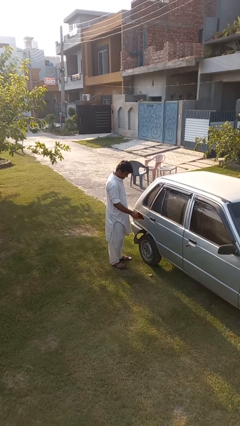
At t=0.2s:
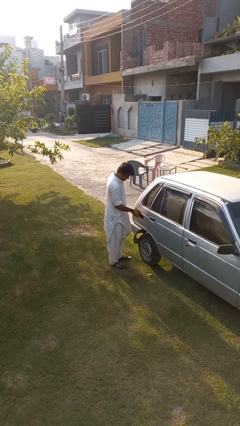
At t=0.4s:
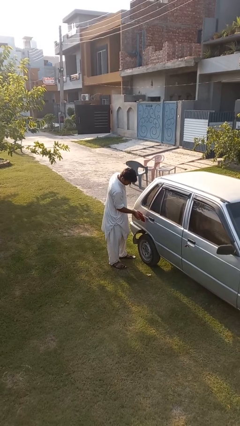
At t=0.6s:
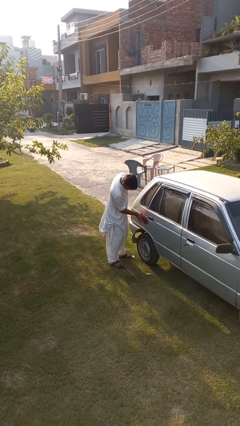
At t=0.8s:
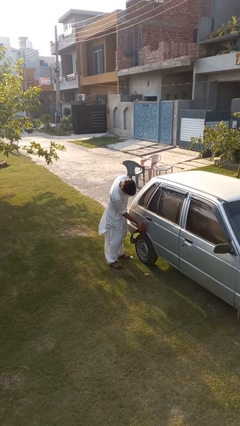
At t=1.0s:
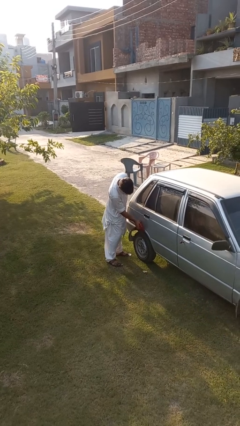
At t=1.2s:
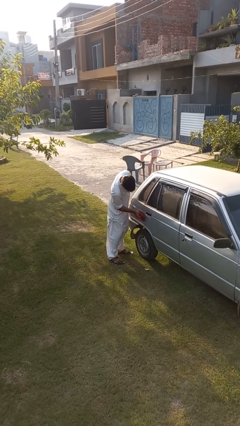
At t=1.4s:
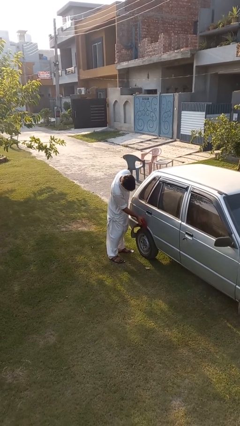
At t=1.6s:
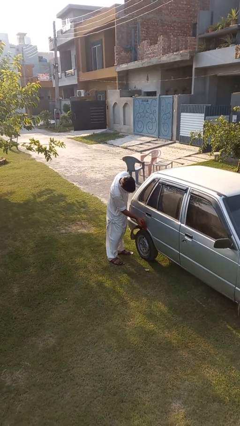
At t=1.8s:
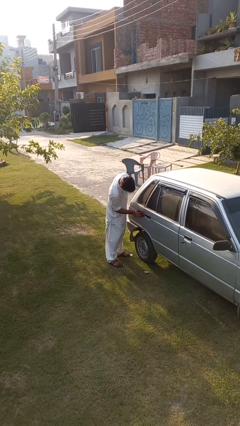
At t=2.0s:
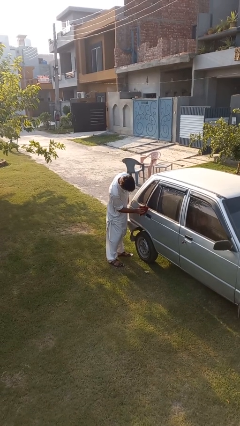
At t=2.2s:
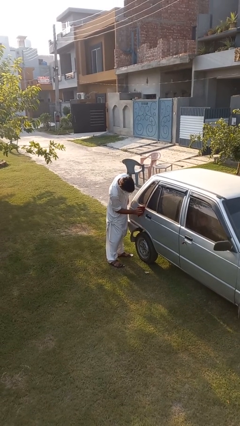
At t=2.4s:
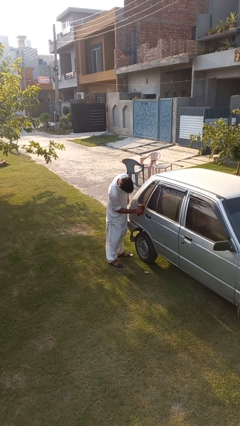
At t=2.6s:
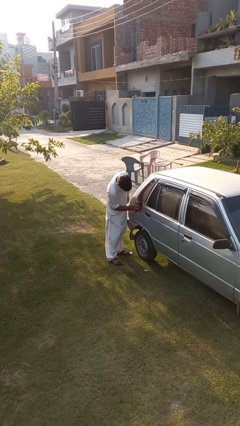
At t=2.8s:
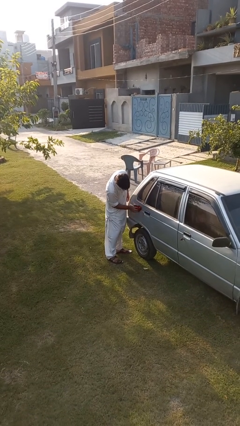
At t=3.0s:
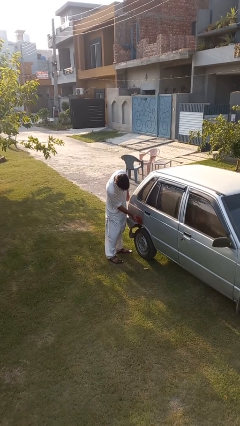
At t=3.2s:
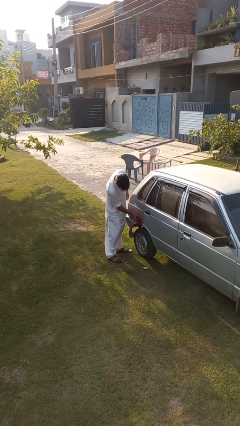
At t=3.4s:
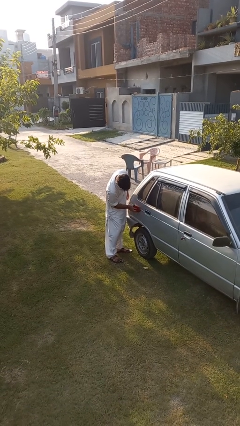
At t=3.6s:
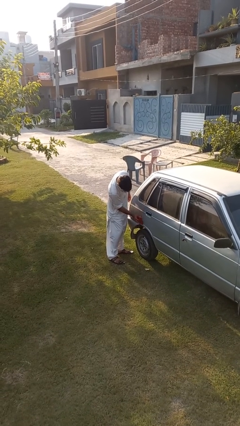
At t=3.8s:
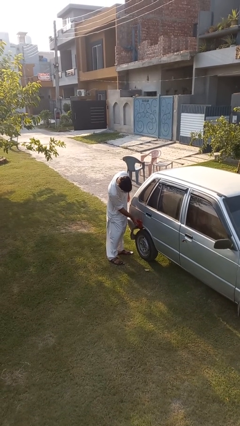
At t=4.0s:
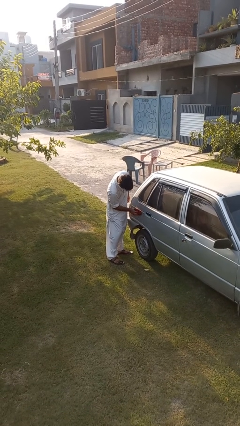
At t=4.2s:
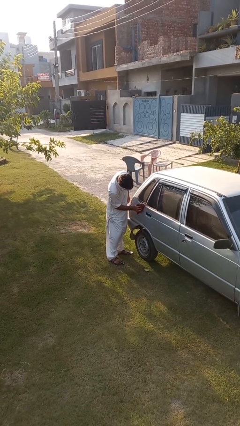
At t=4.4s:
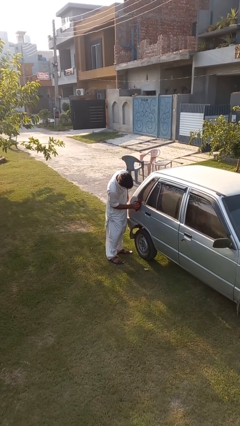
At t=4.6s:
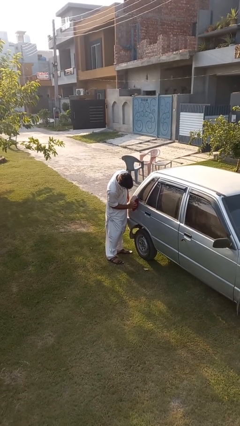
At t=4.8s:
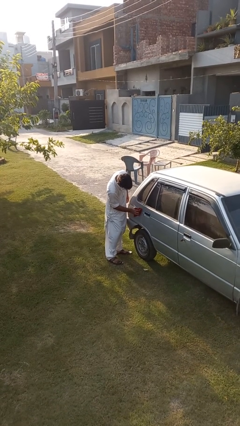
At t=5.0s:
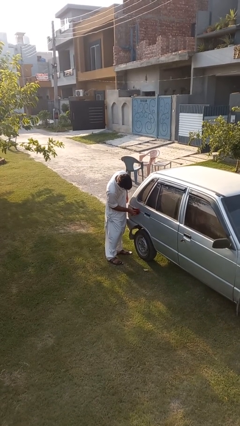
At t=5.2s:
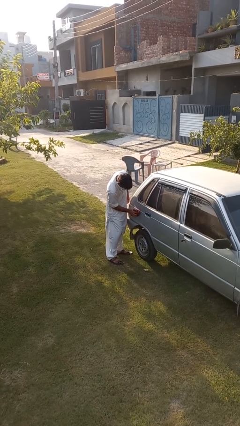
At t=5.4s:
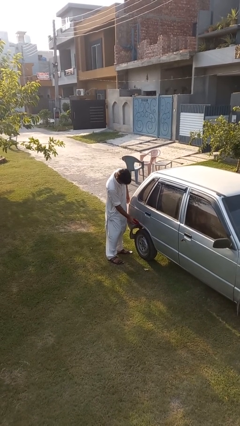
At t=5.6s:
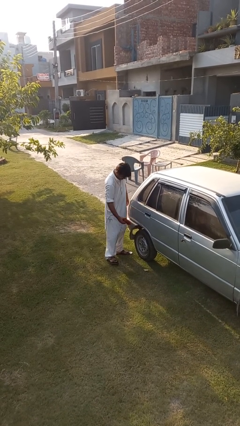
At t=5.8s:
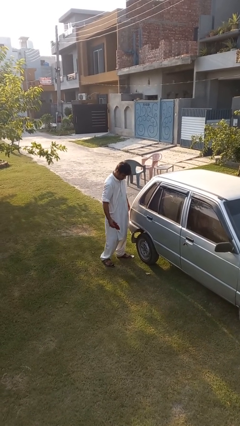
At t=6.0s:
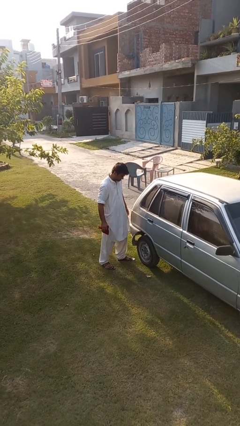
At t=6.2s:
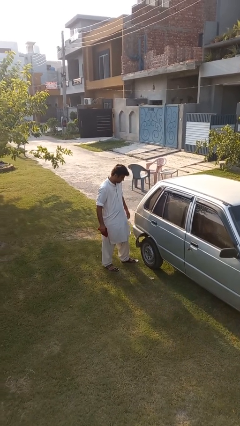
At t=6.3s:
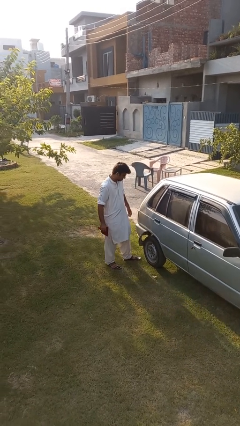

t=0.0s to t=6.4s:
person polishes car with rag

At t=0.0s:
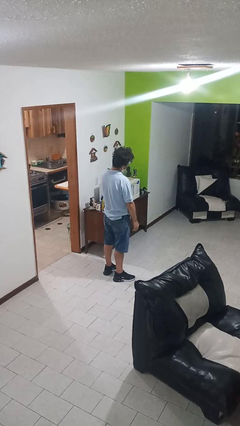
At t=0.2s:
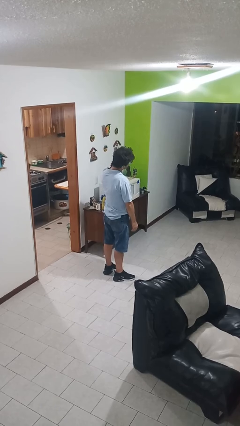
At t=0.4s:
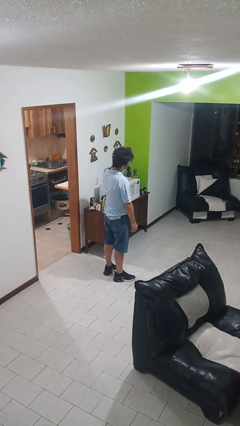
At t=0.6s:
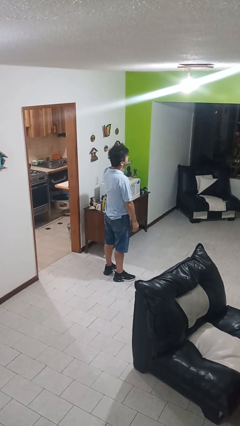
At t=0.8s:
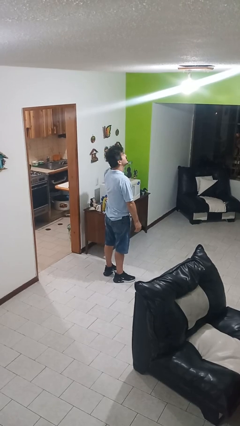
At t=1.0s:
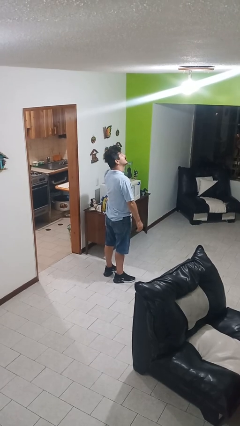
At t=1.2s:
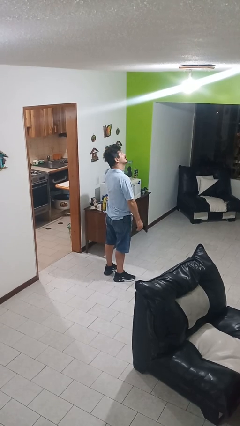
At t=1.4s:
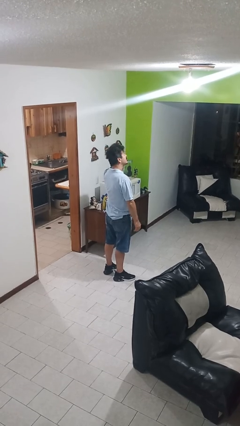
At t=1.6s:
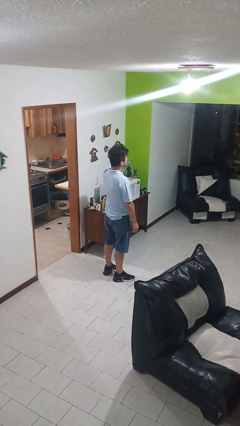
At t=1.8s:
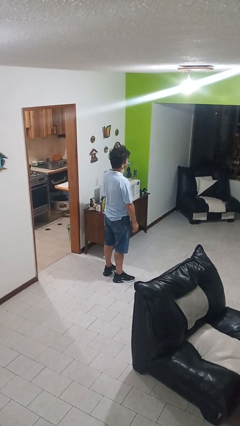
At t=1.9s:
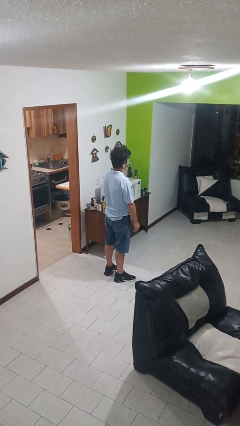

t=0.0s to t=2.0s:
person rubs neck

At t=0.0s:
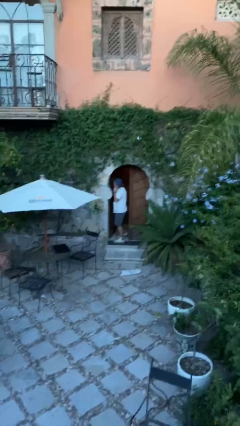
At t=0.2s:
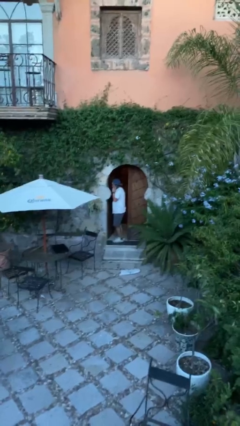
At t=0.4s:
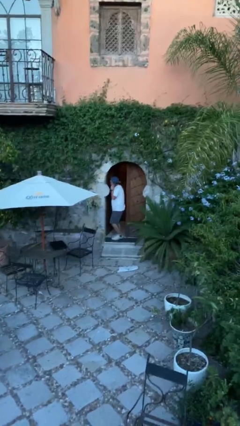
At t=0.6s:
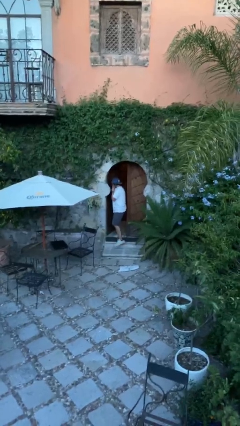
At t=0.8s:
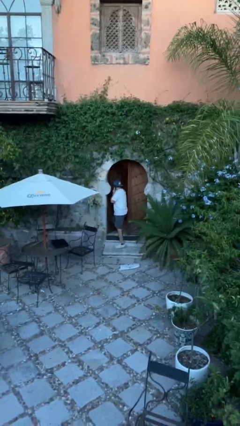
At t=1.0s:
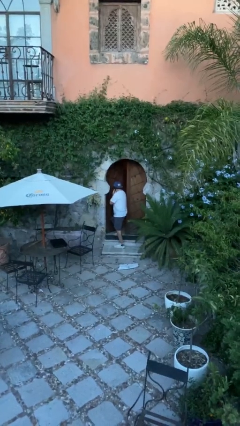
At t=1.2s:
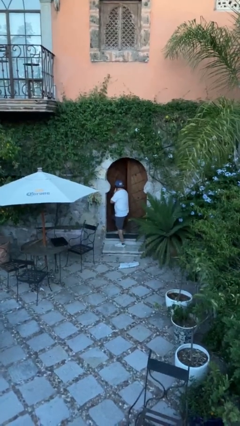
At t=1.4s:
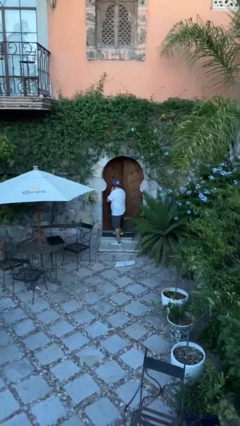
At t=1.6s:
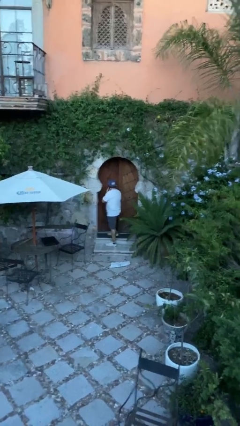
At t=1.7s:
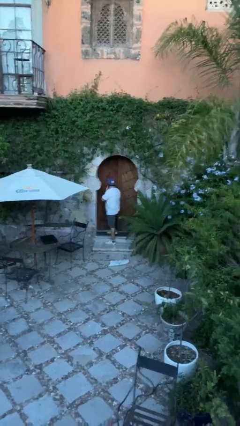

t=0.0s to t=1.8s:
person enters scene through structure

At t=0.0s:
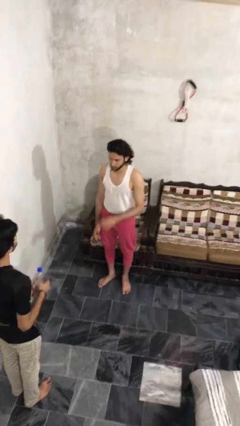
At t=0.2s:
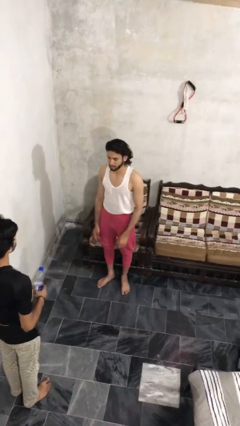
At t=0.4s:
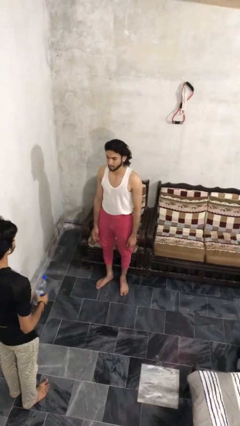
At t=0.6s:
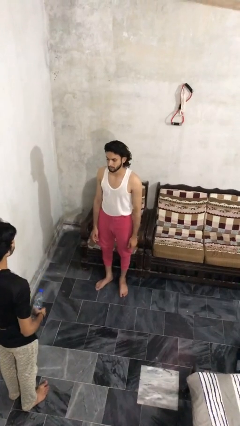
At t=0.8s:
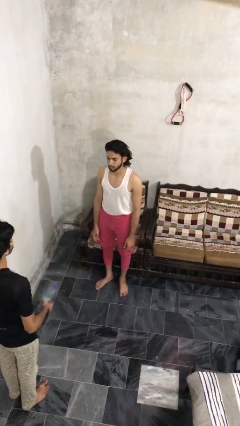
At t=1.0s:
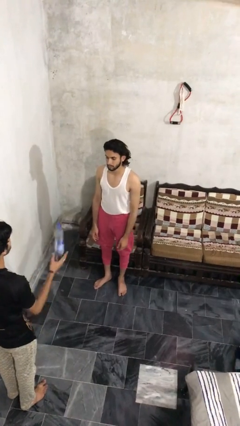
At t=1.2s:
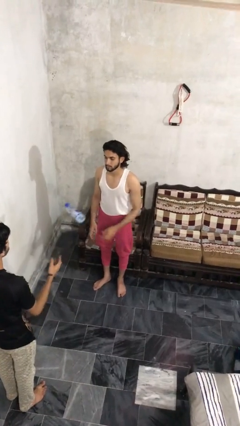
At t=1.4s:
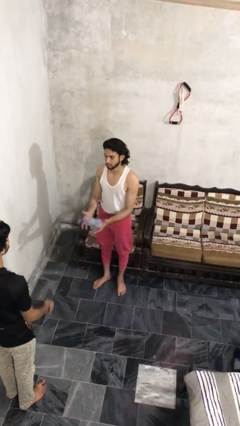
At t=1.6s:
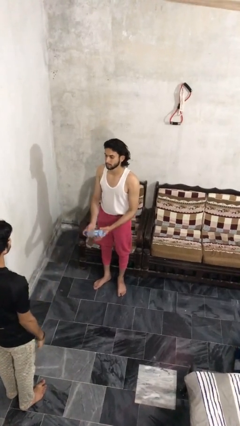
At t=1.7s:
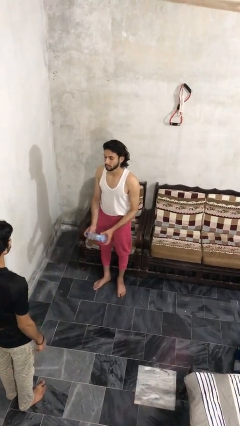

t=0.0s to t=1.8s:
person catches object from person

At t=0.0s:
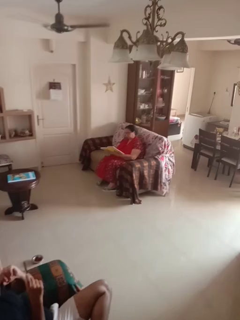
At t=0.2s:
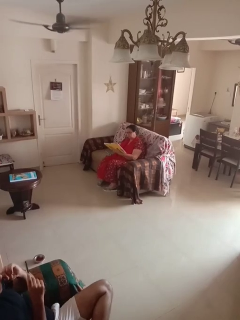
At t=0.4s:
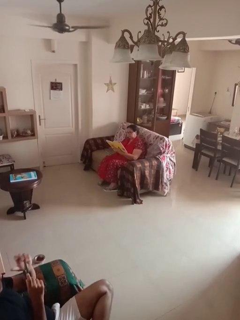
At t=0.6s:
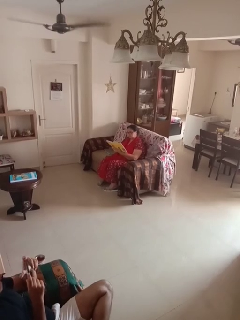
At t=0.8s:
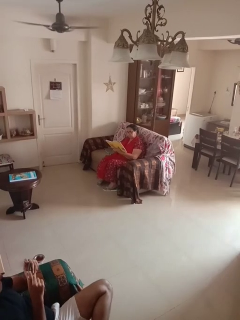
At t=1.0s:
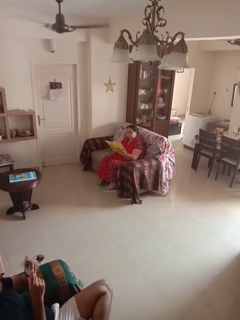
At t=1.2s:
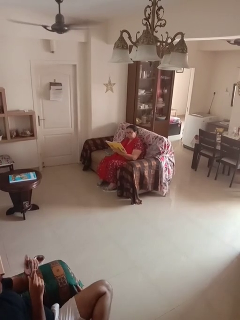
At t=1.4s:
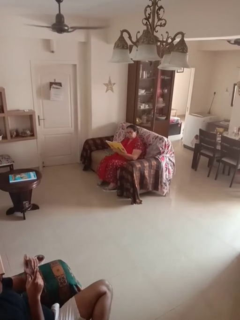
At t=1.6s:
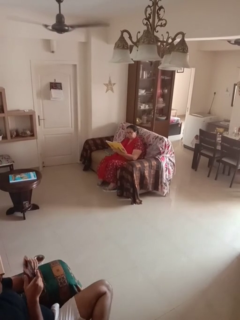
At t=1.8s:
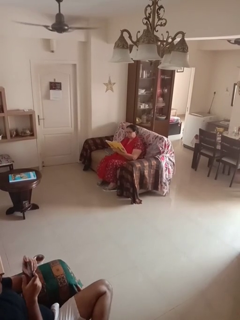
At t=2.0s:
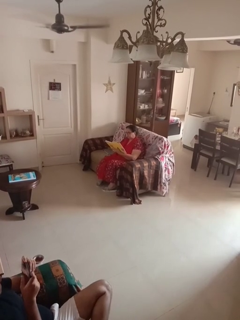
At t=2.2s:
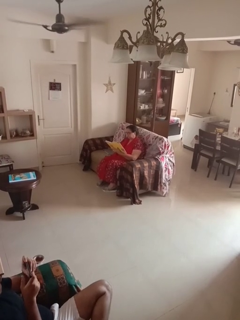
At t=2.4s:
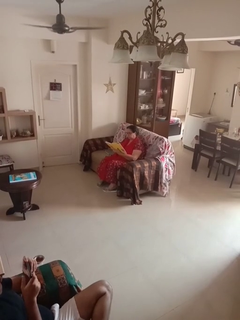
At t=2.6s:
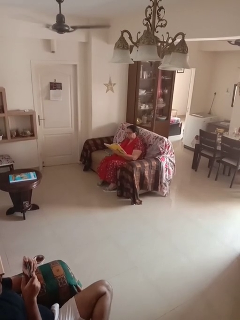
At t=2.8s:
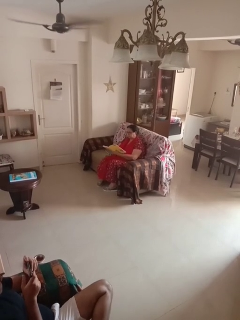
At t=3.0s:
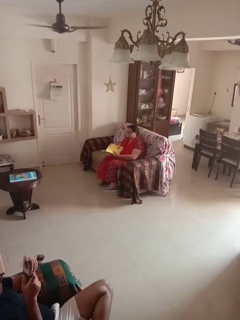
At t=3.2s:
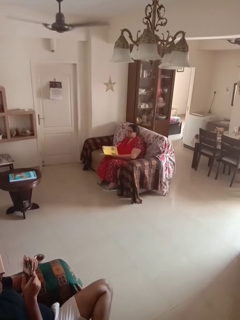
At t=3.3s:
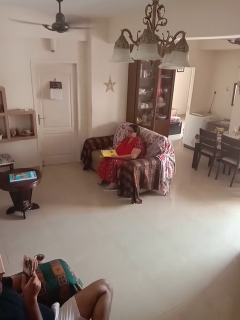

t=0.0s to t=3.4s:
person reads document

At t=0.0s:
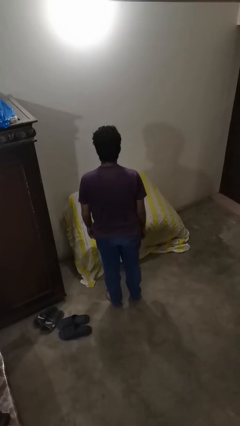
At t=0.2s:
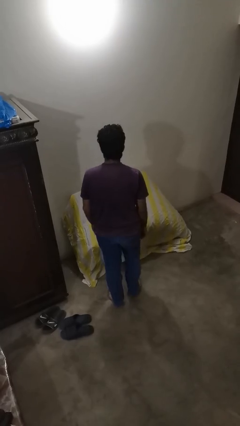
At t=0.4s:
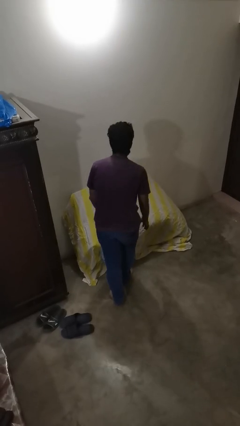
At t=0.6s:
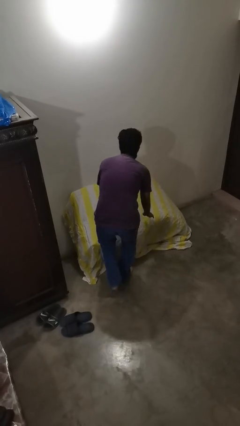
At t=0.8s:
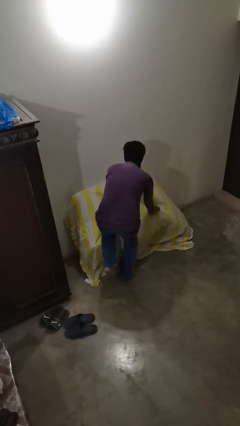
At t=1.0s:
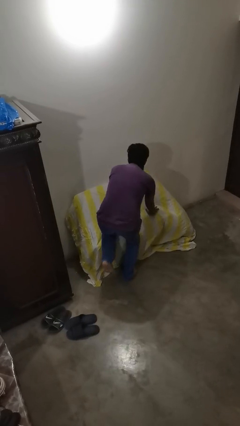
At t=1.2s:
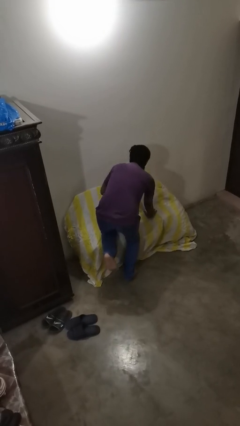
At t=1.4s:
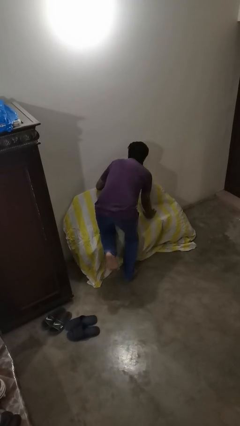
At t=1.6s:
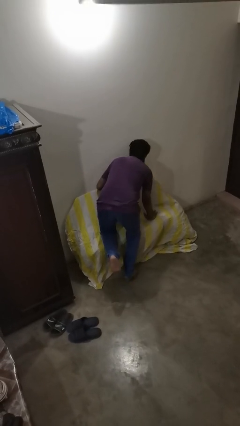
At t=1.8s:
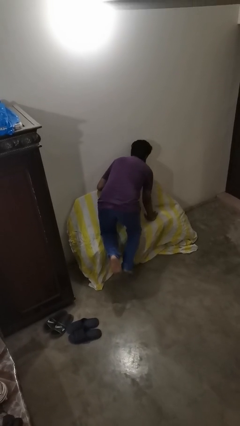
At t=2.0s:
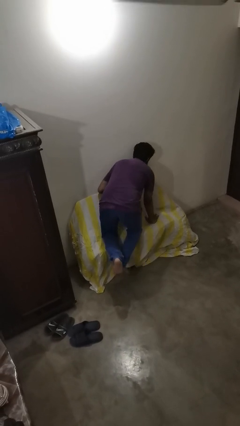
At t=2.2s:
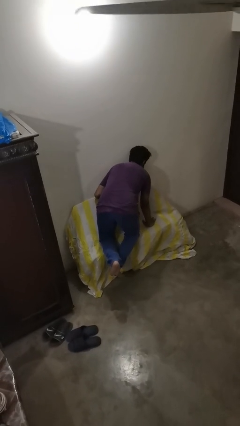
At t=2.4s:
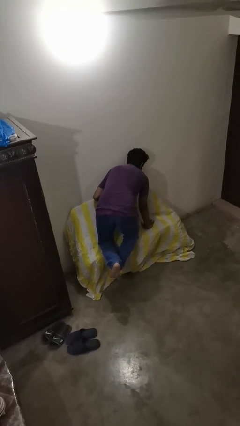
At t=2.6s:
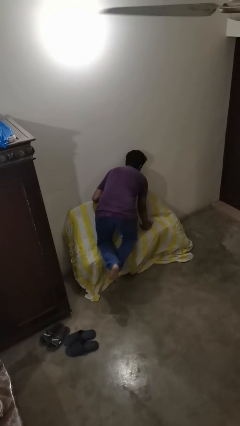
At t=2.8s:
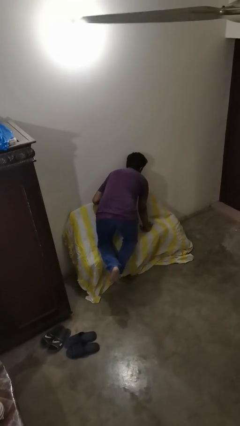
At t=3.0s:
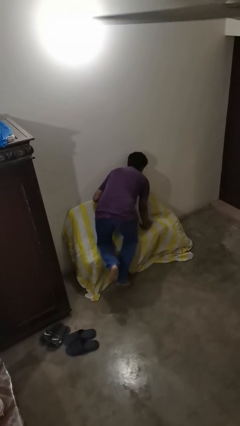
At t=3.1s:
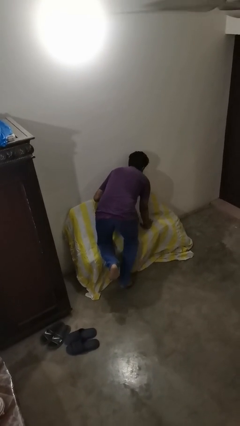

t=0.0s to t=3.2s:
person lies down on couch
